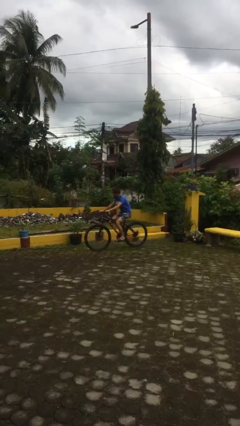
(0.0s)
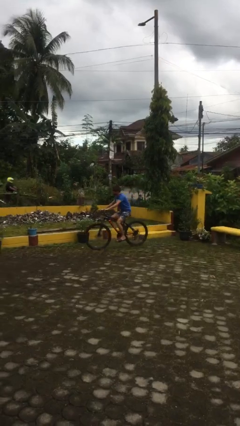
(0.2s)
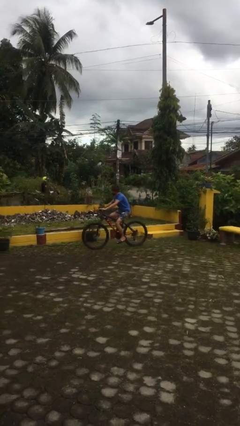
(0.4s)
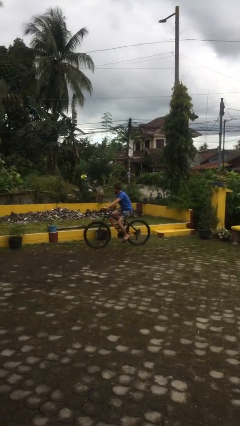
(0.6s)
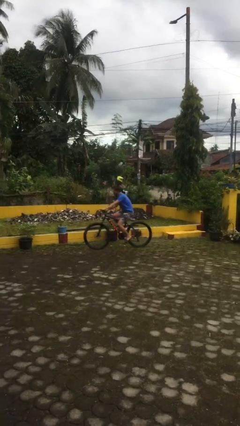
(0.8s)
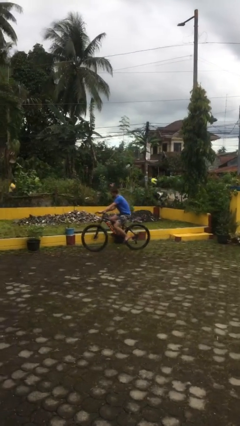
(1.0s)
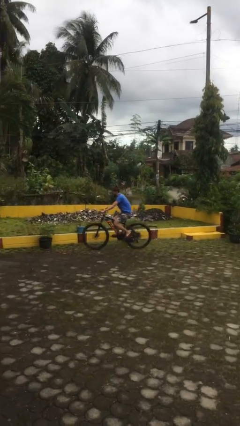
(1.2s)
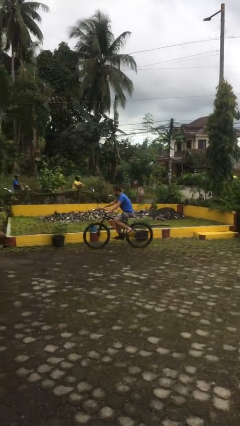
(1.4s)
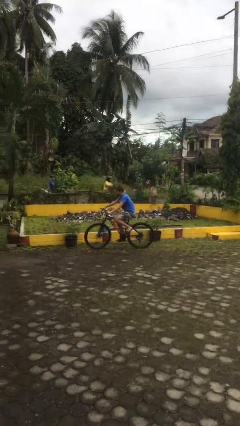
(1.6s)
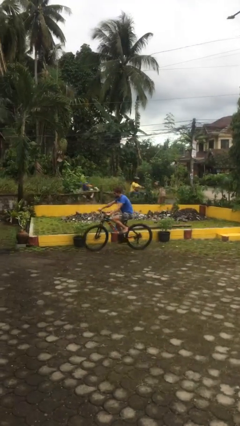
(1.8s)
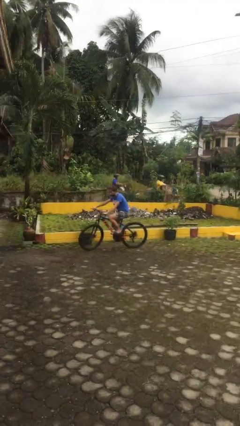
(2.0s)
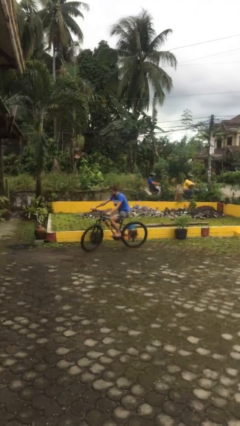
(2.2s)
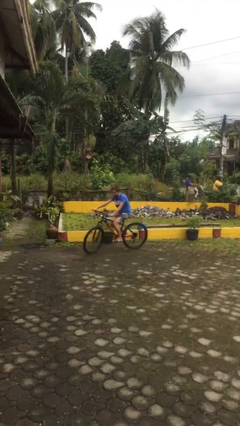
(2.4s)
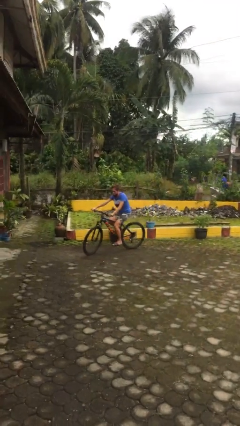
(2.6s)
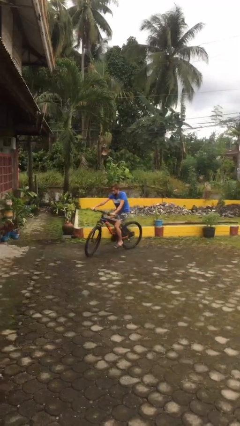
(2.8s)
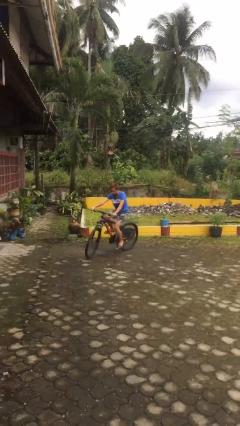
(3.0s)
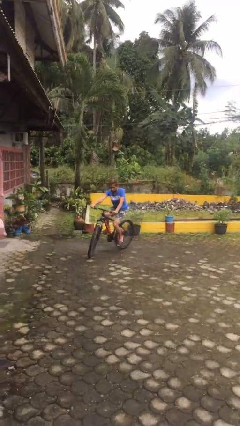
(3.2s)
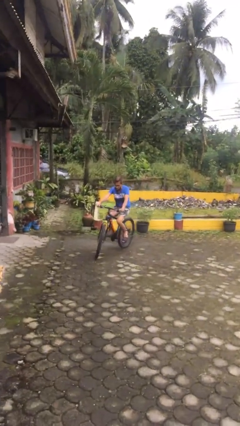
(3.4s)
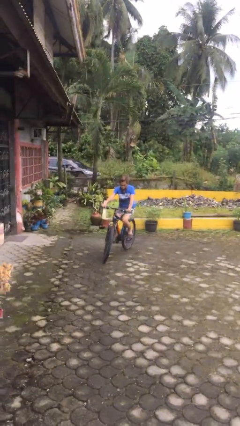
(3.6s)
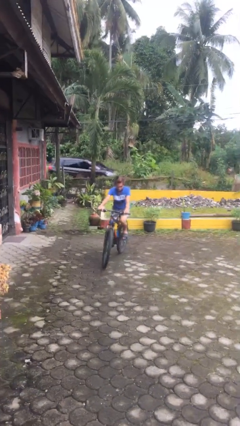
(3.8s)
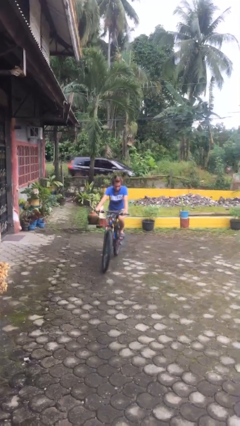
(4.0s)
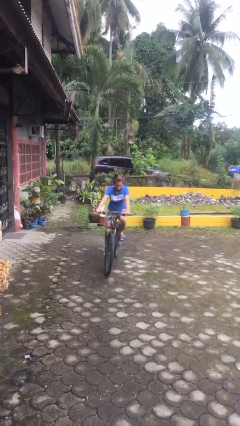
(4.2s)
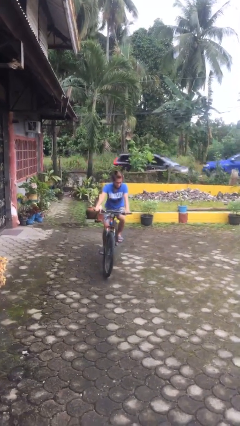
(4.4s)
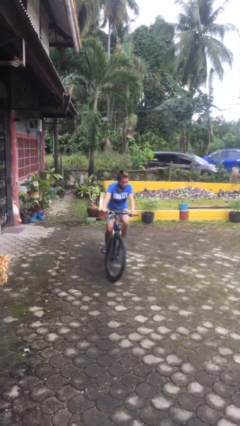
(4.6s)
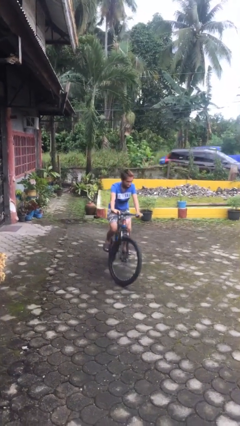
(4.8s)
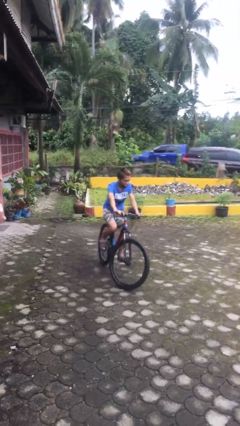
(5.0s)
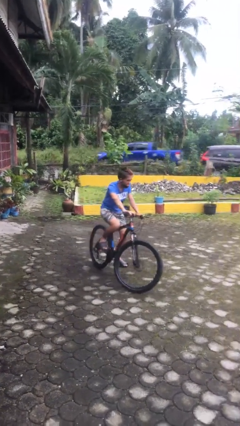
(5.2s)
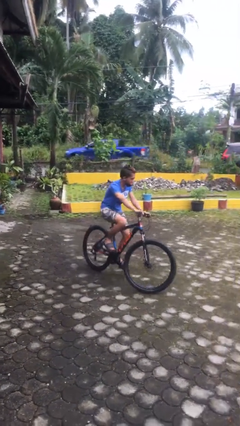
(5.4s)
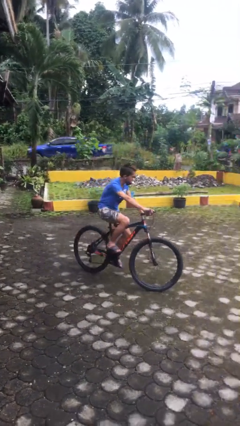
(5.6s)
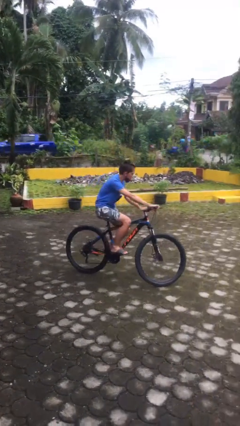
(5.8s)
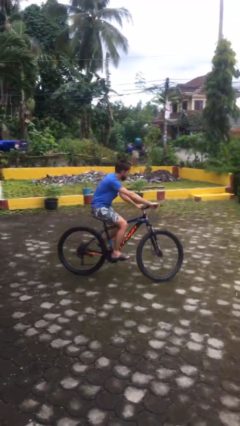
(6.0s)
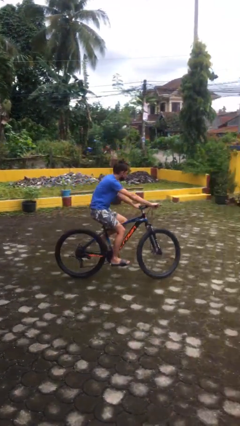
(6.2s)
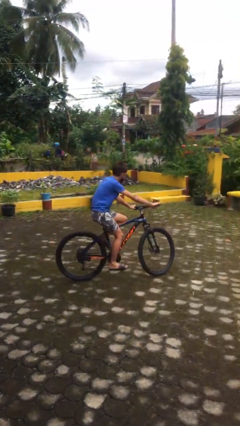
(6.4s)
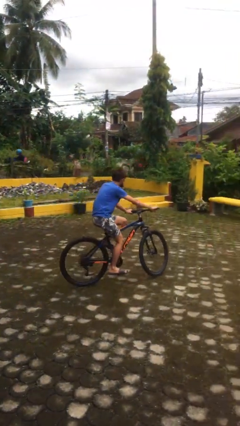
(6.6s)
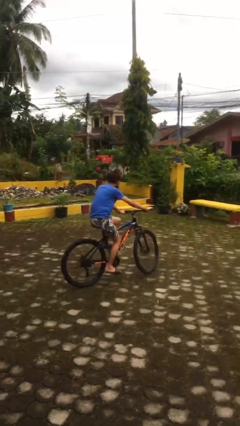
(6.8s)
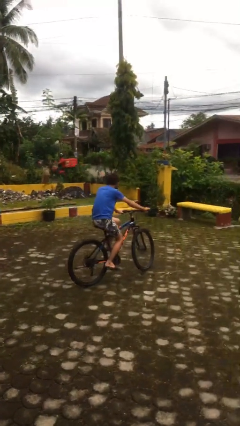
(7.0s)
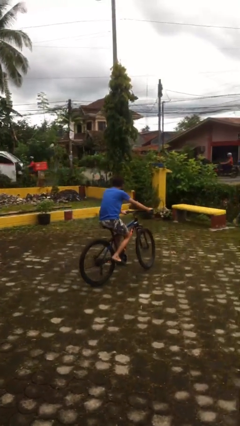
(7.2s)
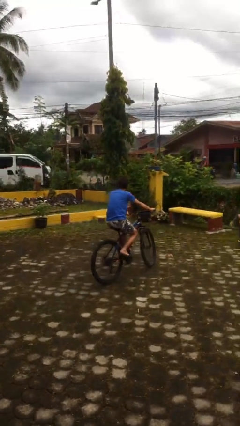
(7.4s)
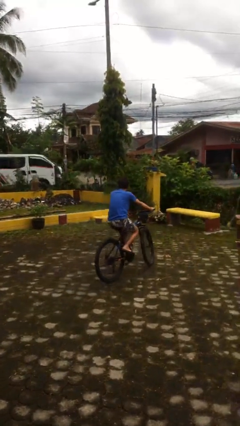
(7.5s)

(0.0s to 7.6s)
person rides bicycle

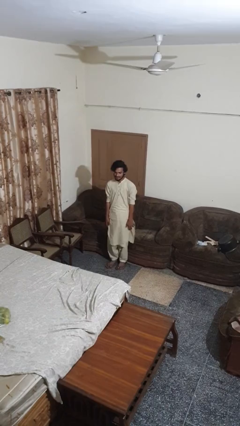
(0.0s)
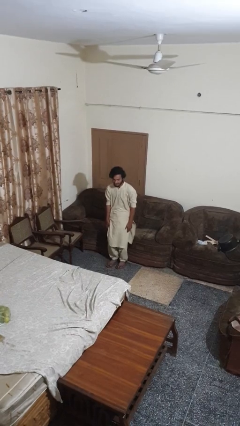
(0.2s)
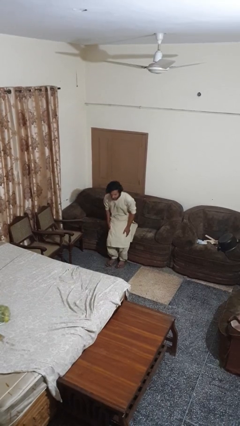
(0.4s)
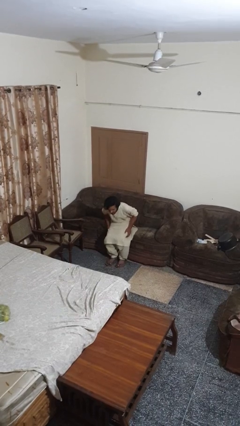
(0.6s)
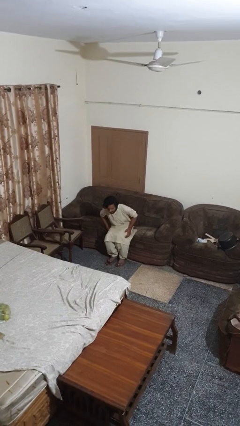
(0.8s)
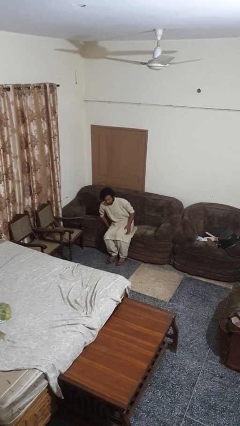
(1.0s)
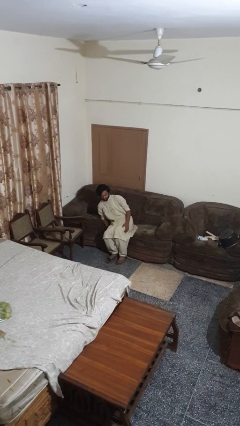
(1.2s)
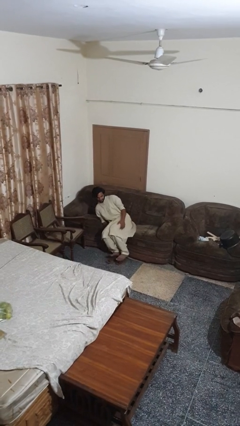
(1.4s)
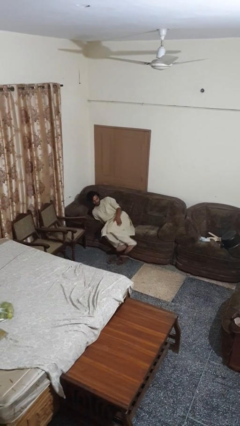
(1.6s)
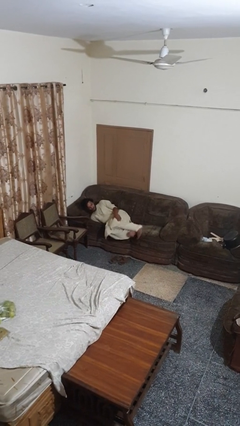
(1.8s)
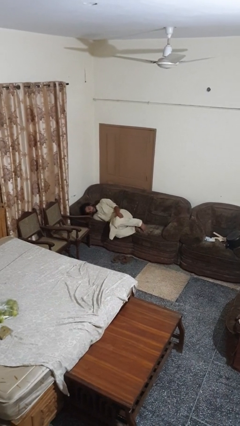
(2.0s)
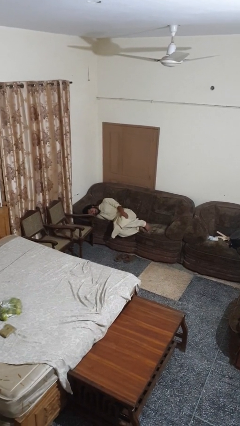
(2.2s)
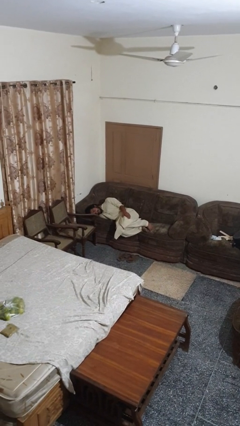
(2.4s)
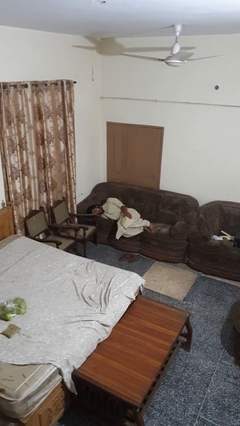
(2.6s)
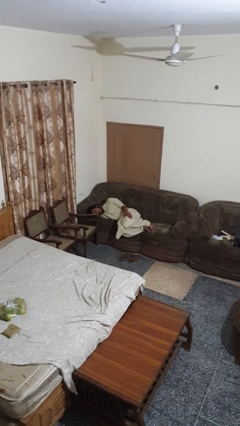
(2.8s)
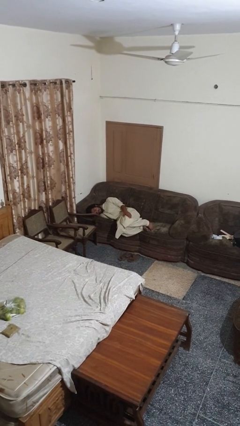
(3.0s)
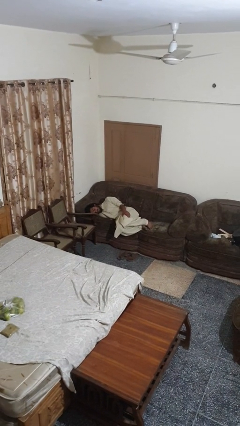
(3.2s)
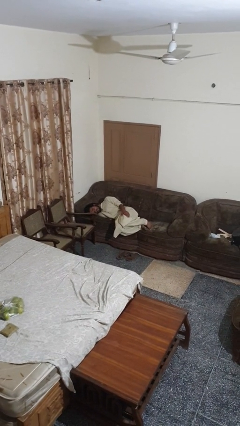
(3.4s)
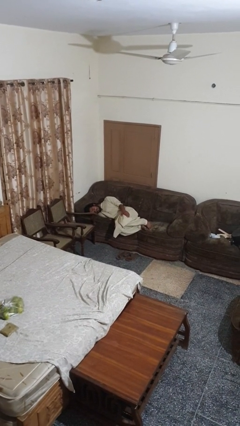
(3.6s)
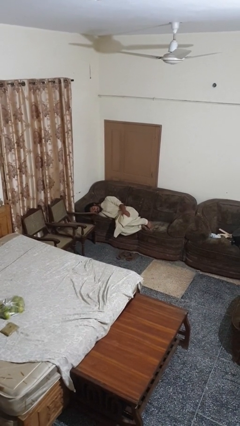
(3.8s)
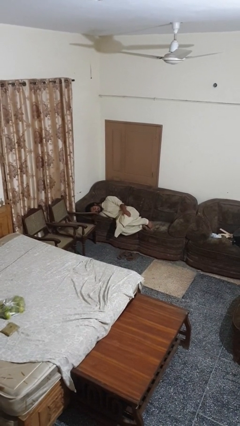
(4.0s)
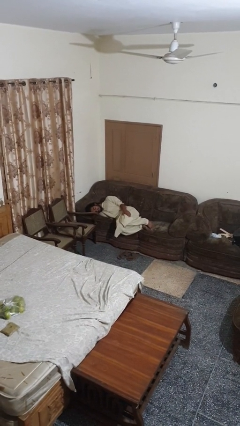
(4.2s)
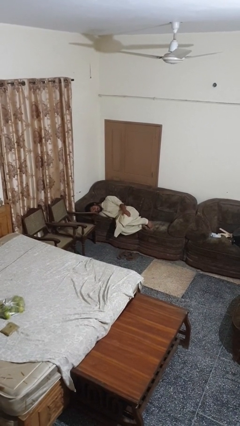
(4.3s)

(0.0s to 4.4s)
person lies down on couch

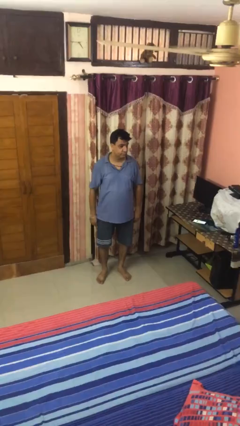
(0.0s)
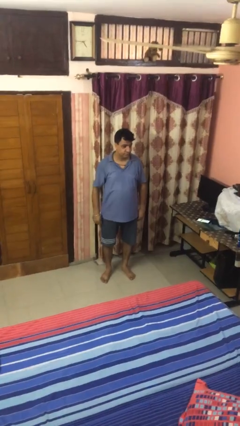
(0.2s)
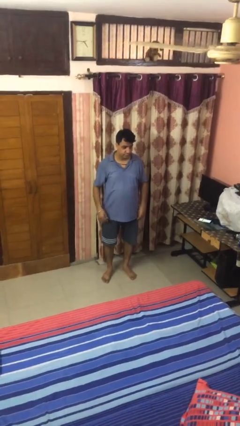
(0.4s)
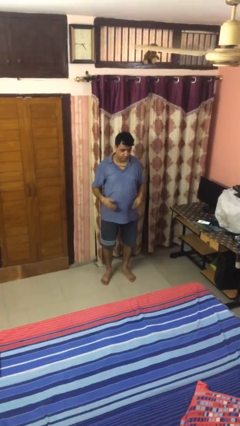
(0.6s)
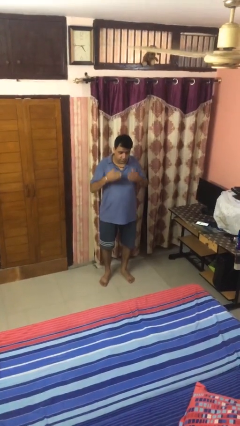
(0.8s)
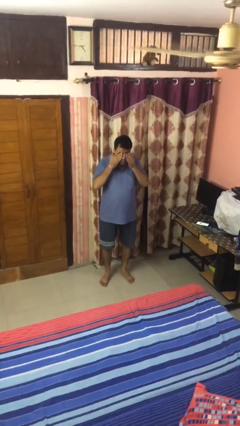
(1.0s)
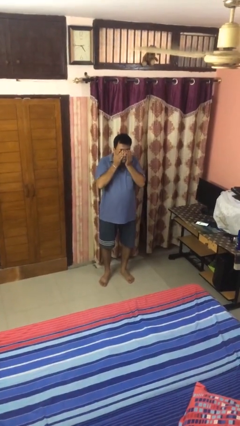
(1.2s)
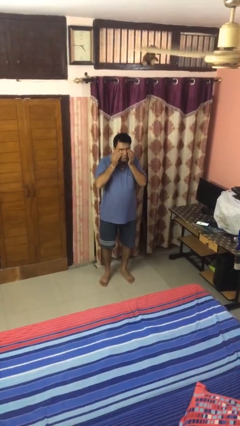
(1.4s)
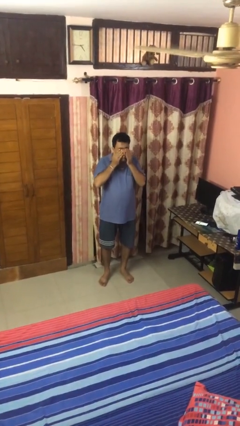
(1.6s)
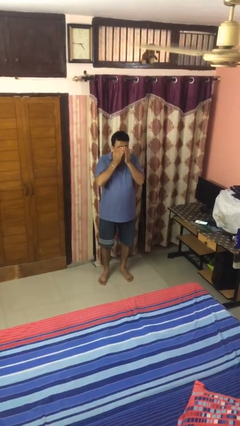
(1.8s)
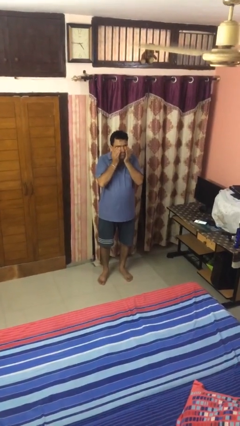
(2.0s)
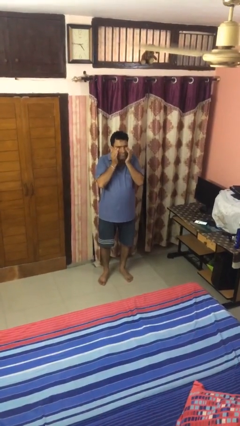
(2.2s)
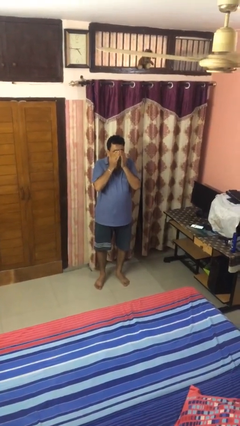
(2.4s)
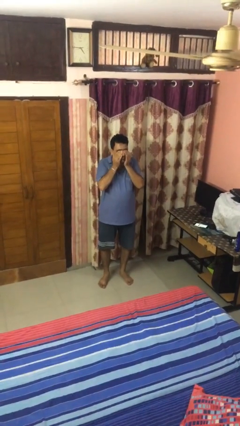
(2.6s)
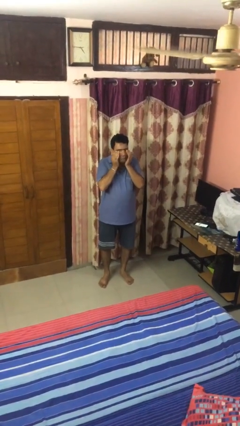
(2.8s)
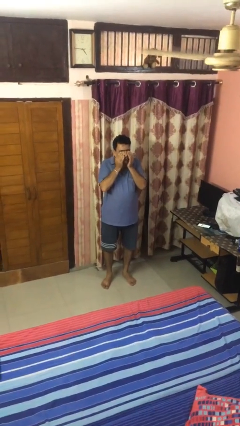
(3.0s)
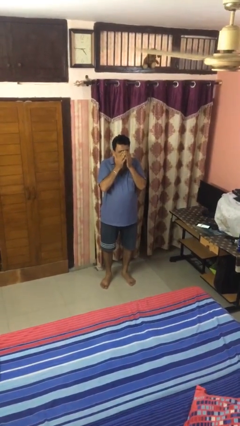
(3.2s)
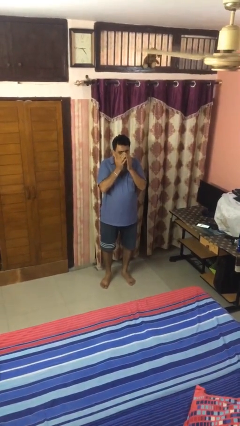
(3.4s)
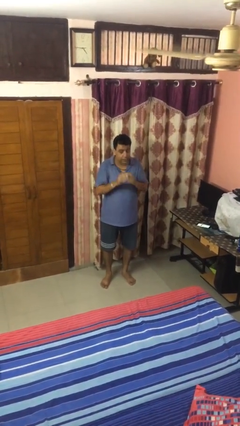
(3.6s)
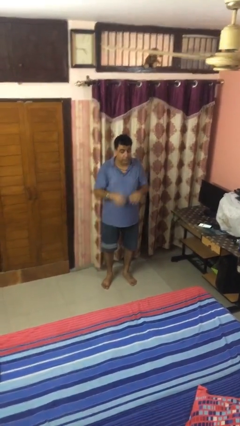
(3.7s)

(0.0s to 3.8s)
person rubs eyes

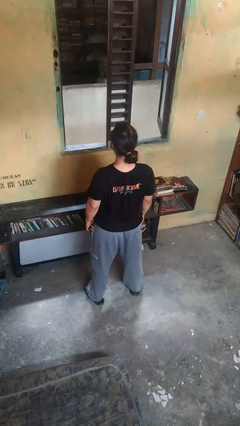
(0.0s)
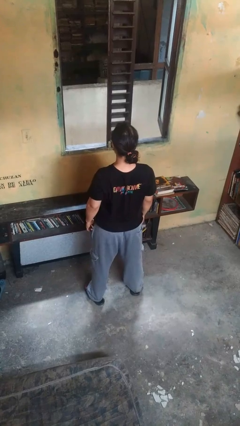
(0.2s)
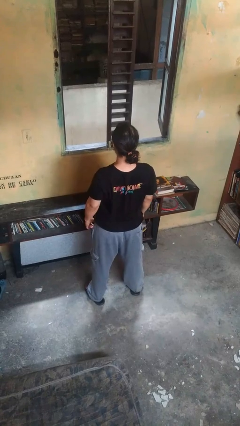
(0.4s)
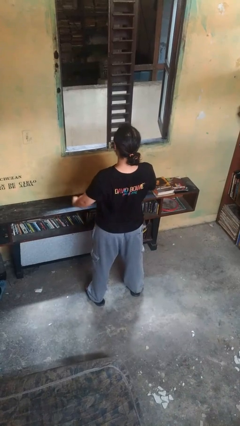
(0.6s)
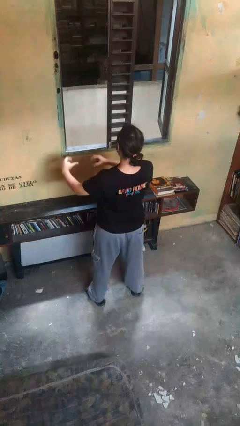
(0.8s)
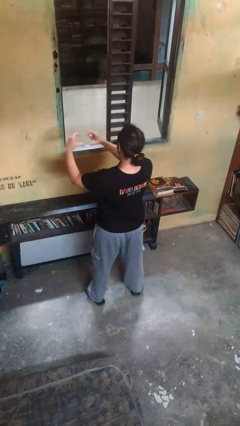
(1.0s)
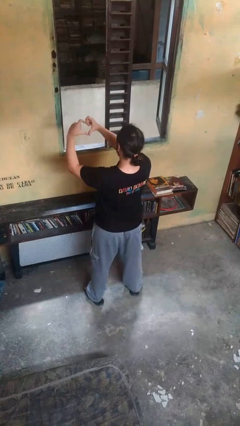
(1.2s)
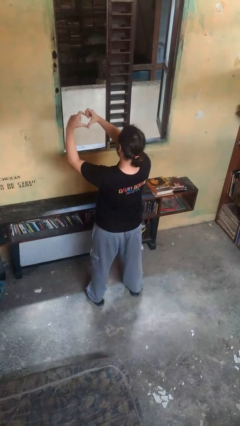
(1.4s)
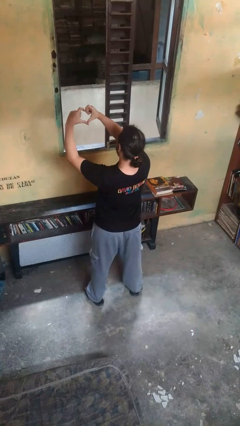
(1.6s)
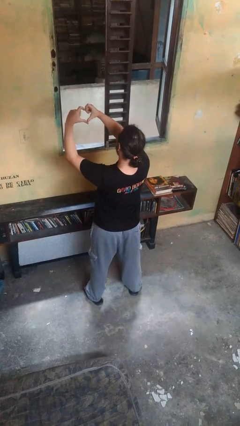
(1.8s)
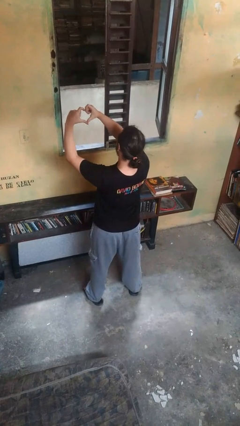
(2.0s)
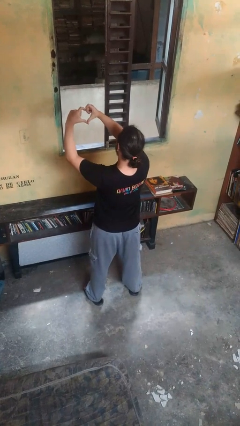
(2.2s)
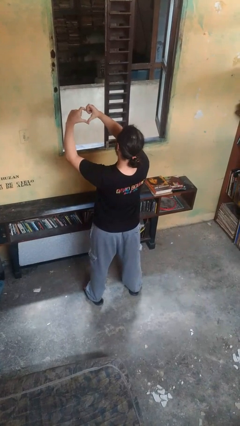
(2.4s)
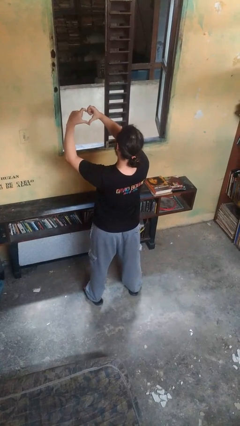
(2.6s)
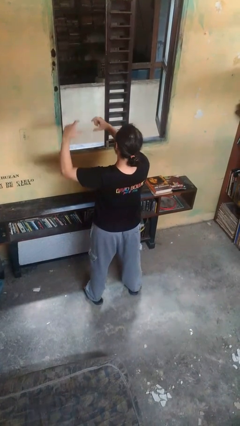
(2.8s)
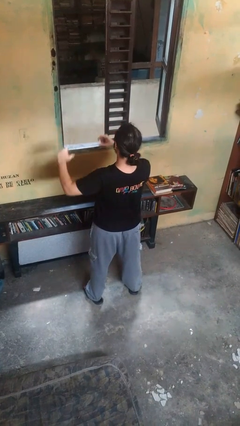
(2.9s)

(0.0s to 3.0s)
person gestures heart
